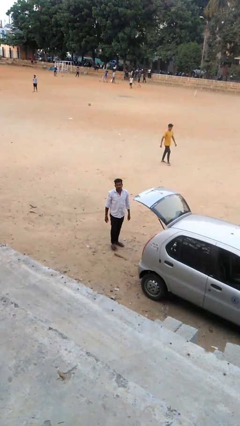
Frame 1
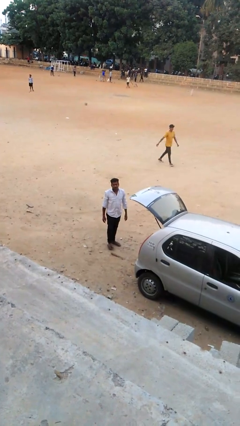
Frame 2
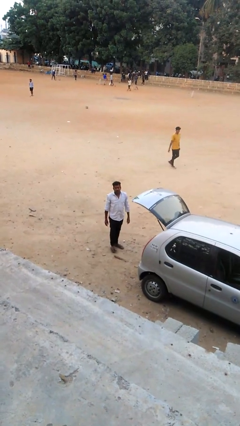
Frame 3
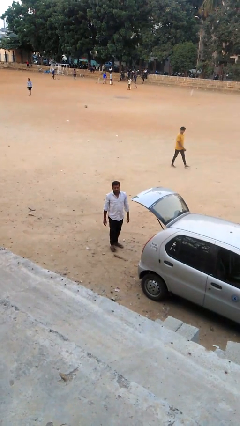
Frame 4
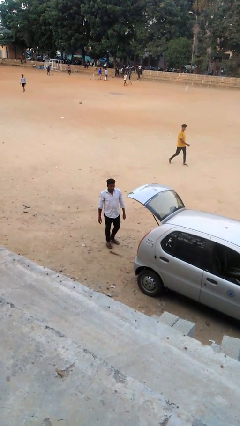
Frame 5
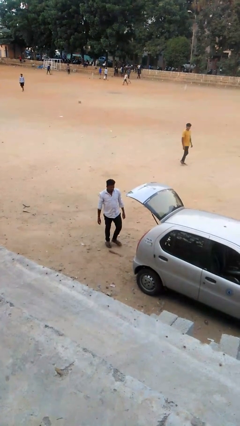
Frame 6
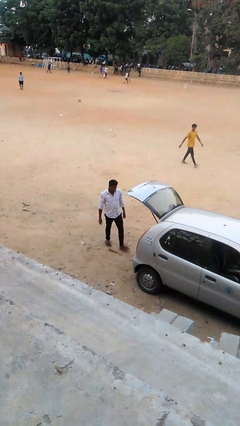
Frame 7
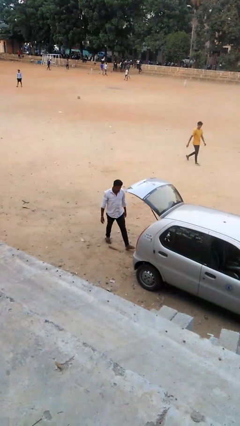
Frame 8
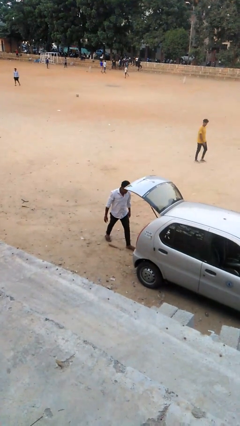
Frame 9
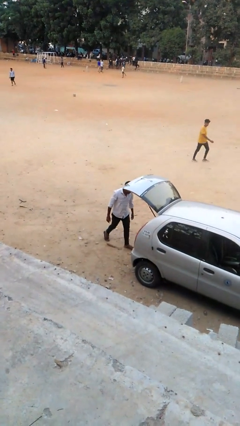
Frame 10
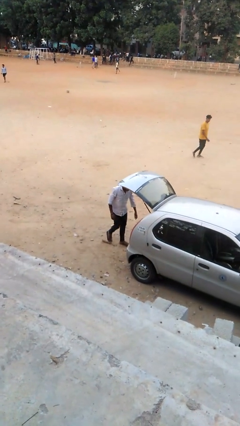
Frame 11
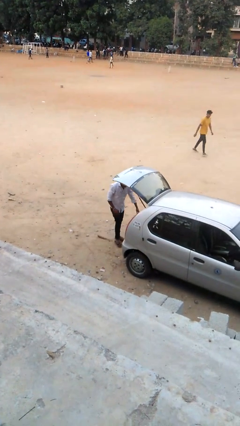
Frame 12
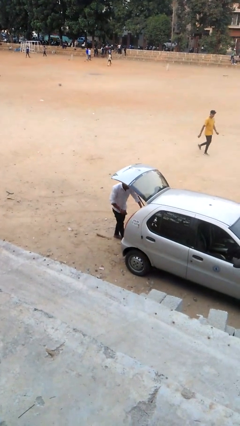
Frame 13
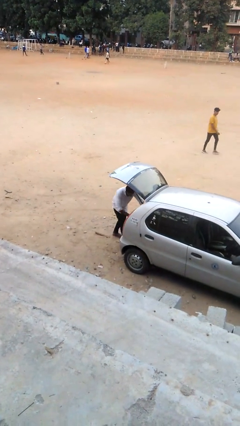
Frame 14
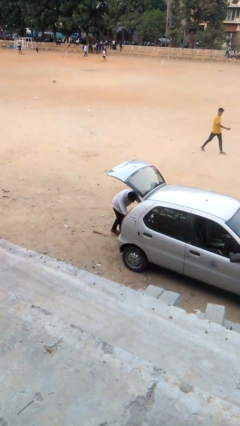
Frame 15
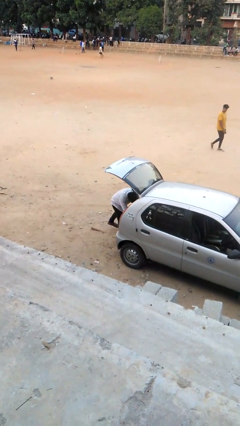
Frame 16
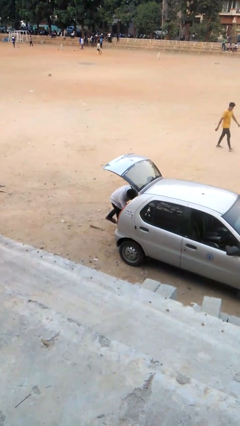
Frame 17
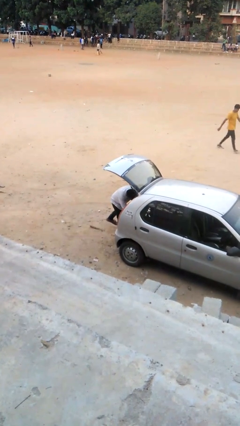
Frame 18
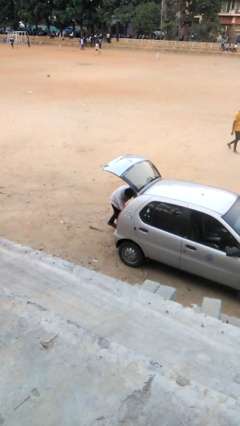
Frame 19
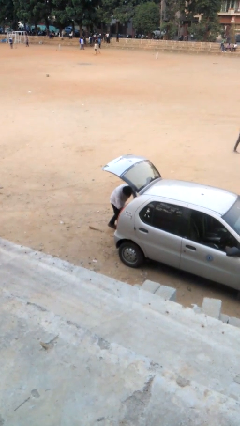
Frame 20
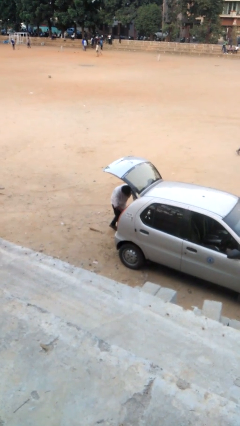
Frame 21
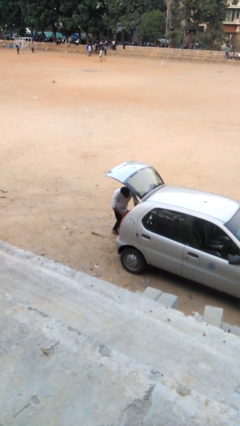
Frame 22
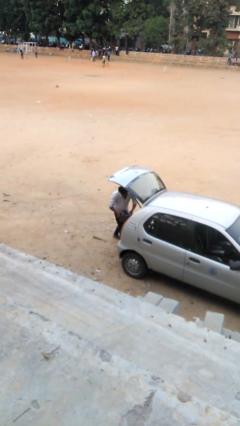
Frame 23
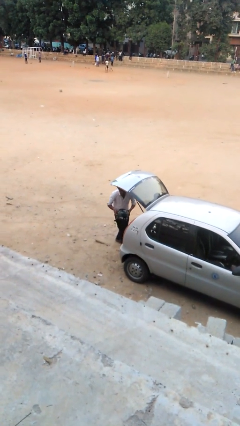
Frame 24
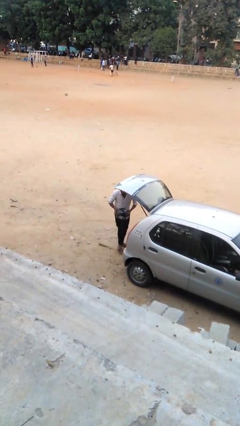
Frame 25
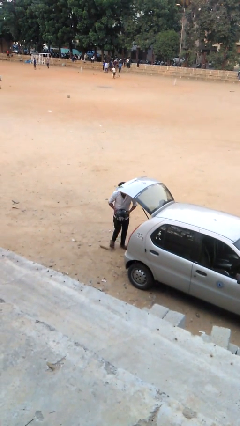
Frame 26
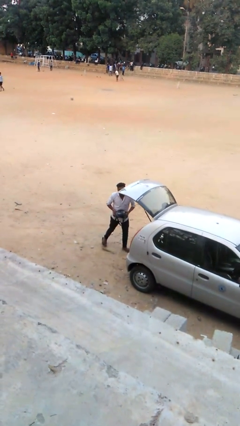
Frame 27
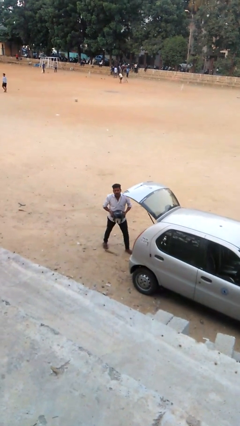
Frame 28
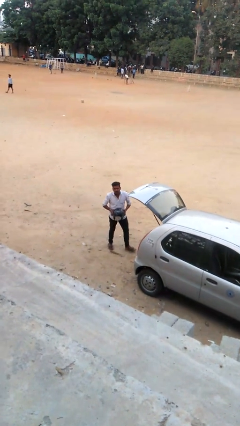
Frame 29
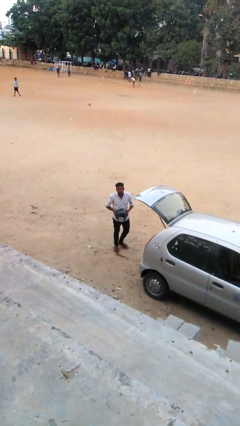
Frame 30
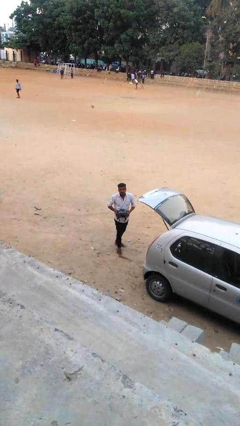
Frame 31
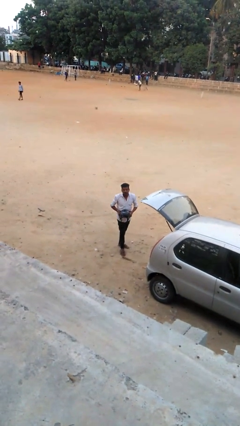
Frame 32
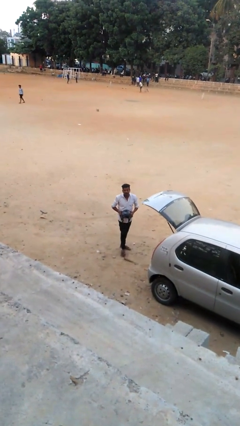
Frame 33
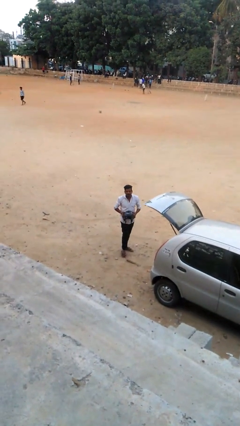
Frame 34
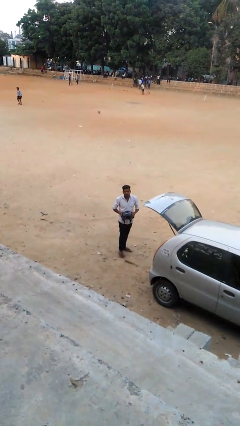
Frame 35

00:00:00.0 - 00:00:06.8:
person unloads car

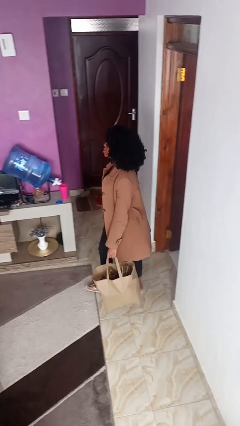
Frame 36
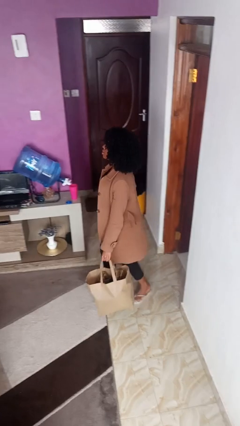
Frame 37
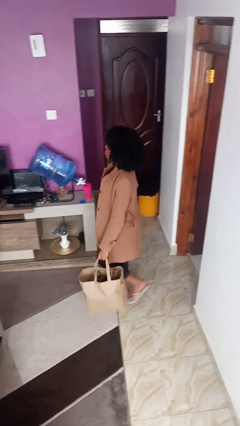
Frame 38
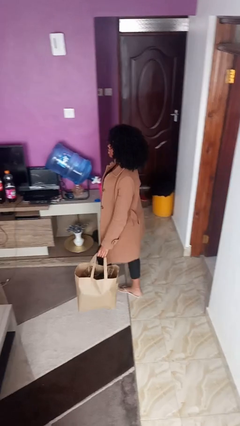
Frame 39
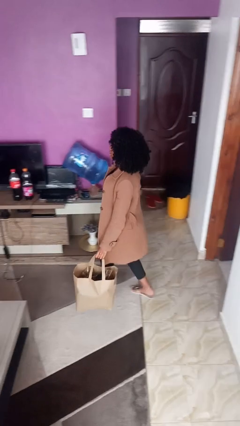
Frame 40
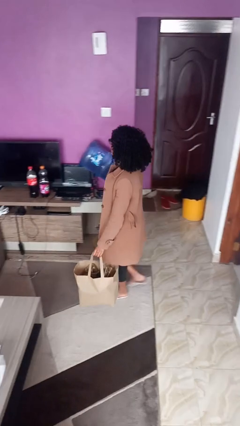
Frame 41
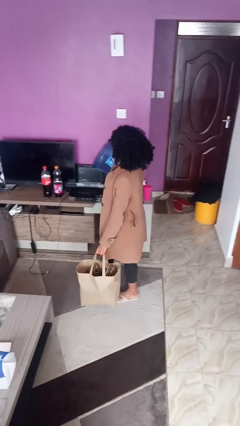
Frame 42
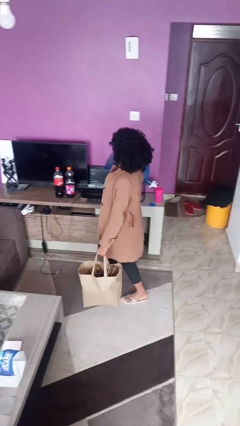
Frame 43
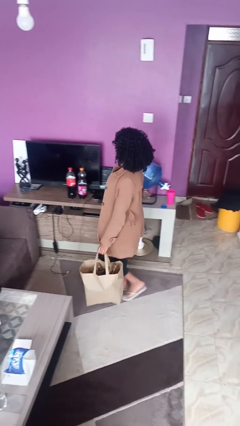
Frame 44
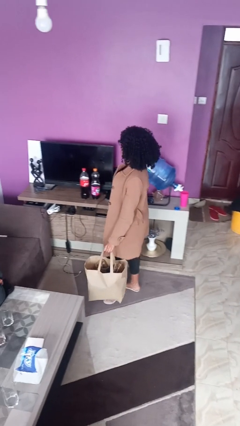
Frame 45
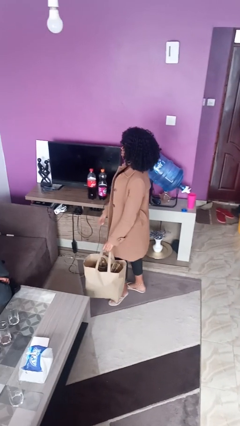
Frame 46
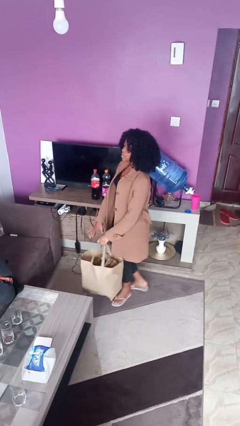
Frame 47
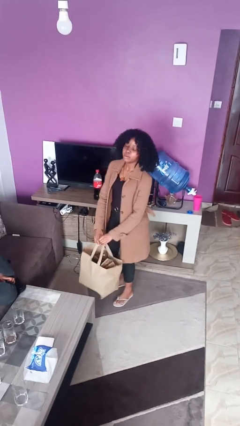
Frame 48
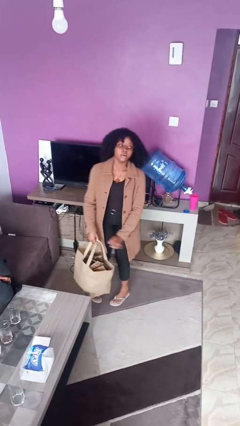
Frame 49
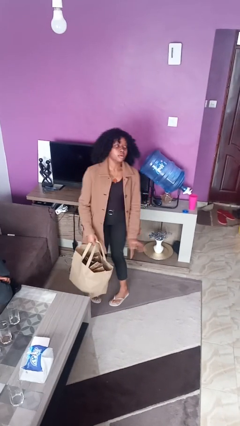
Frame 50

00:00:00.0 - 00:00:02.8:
person carries groceries

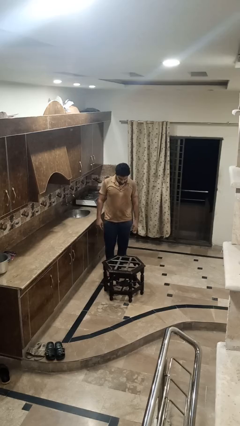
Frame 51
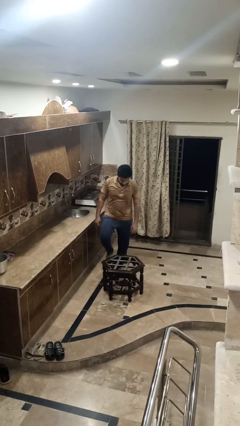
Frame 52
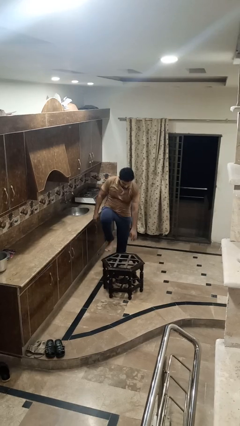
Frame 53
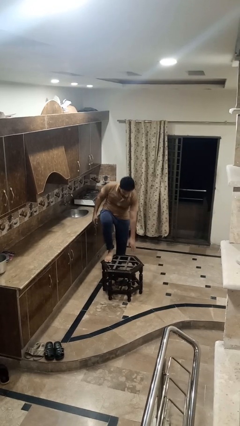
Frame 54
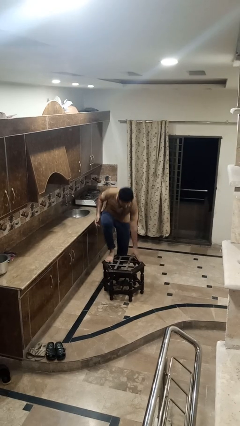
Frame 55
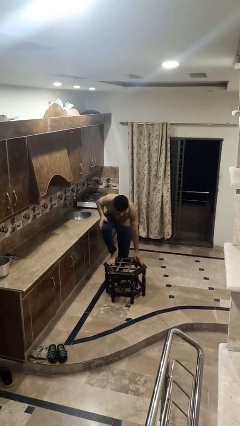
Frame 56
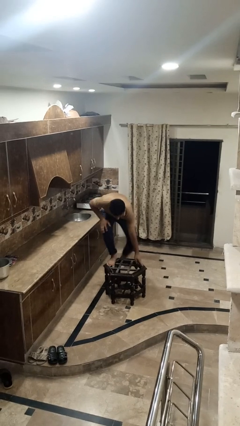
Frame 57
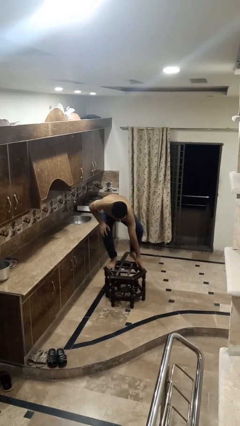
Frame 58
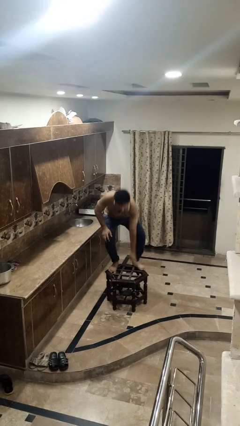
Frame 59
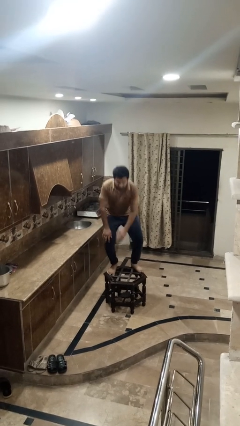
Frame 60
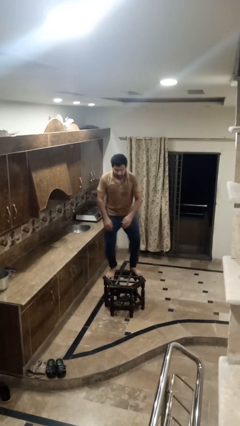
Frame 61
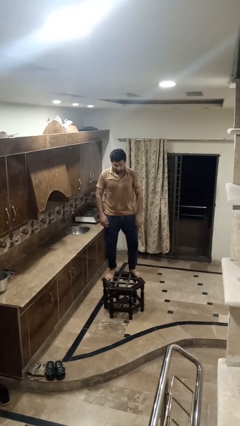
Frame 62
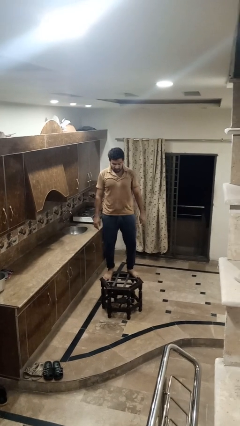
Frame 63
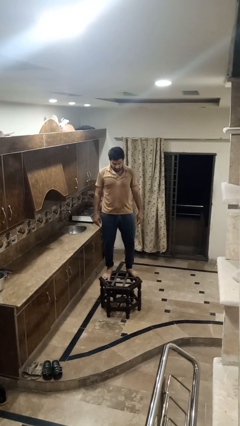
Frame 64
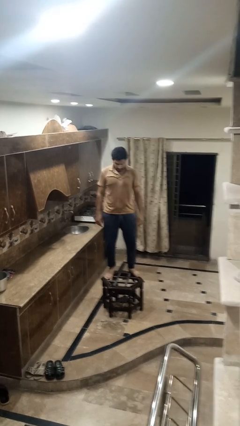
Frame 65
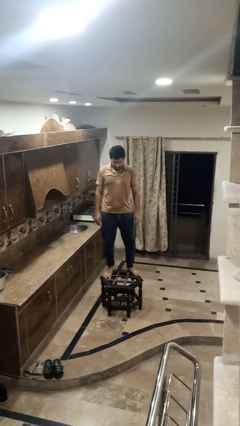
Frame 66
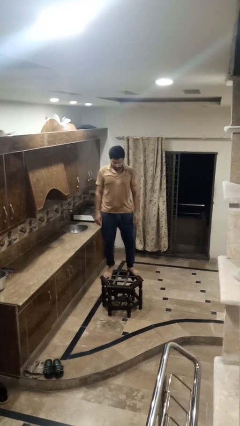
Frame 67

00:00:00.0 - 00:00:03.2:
person climbs on table

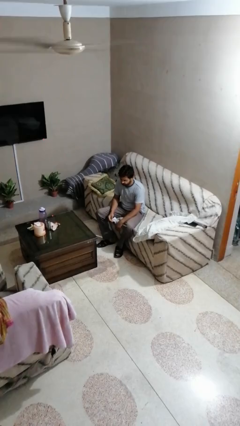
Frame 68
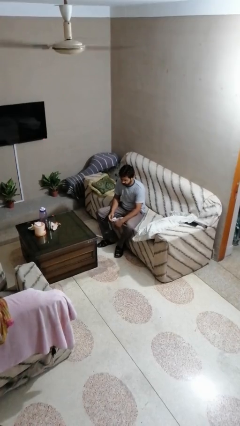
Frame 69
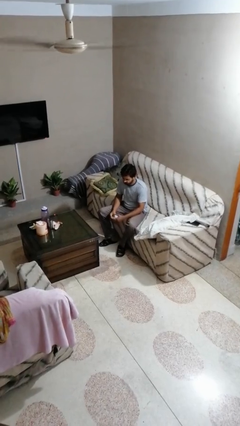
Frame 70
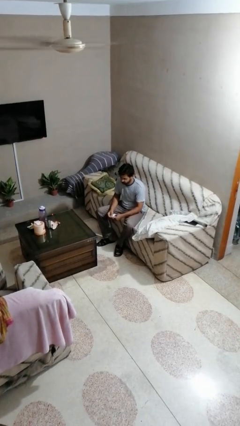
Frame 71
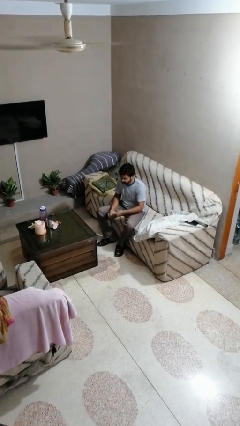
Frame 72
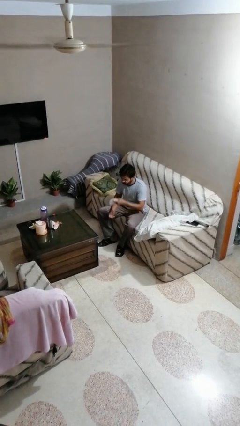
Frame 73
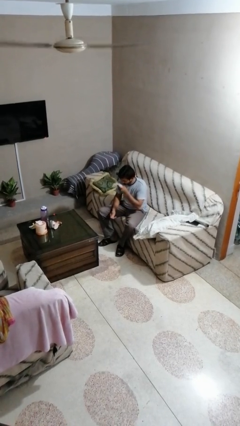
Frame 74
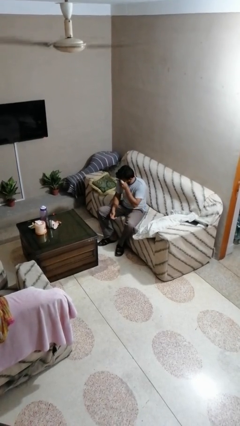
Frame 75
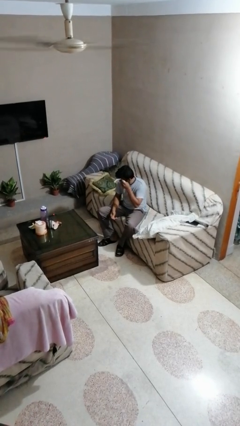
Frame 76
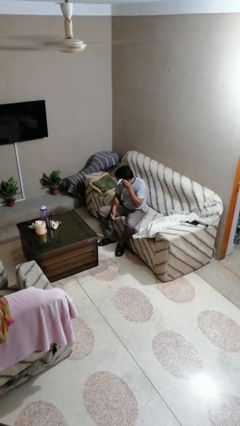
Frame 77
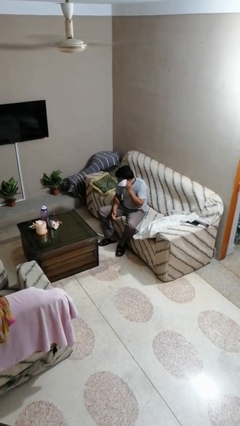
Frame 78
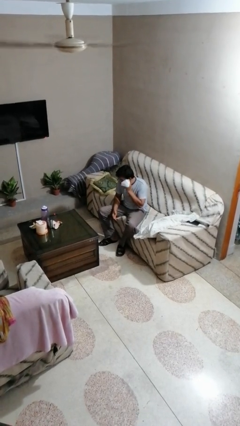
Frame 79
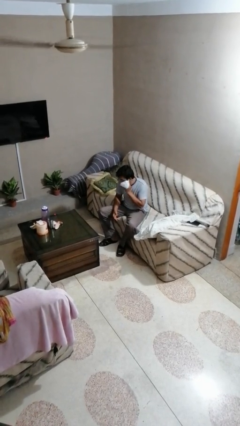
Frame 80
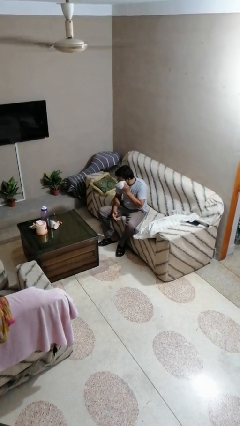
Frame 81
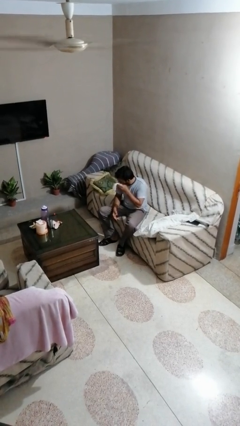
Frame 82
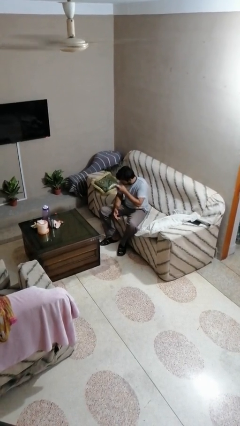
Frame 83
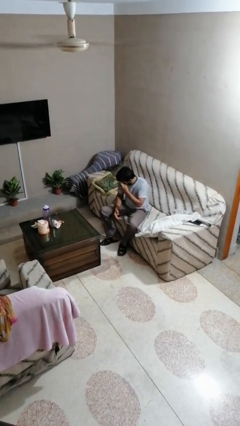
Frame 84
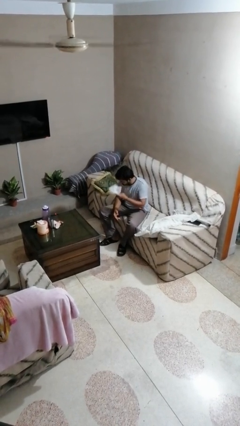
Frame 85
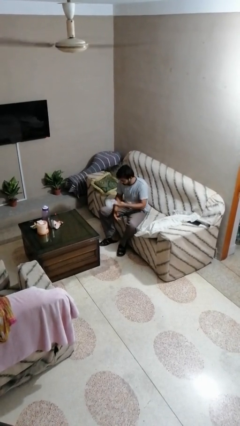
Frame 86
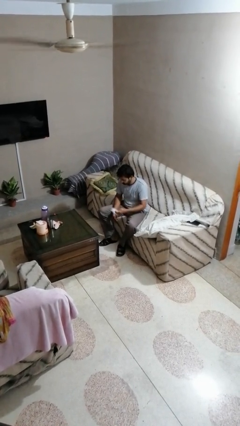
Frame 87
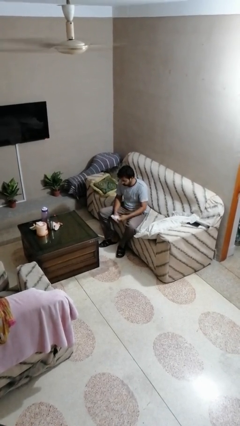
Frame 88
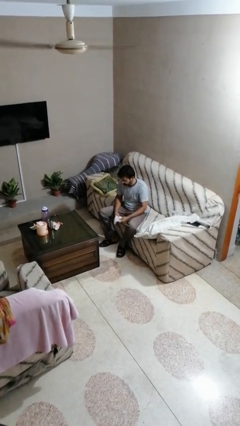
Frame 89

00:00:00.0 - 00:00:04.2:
person wipes mouth with napkin

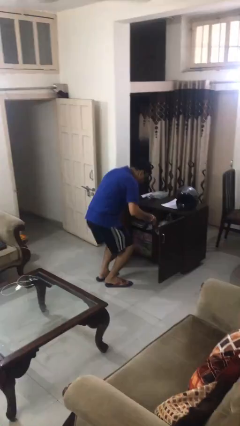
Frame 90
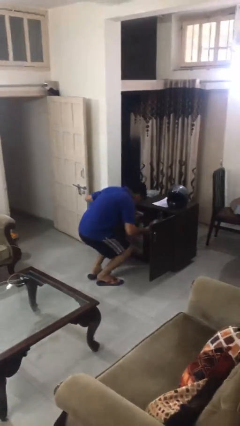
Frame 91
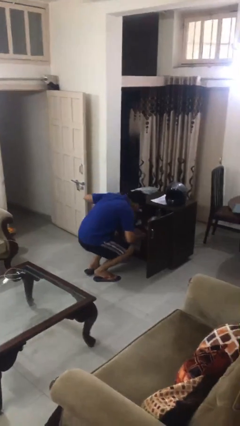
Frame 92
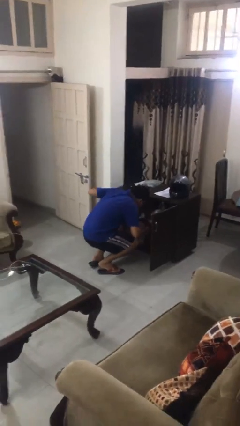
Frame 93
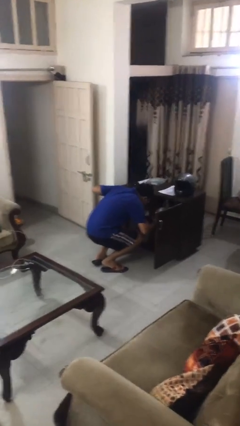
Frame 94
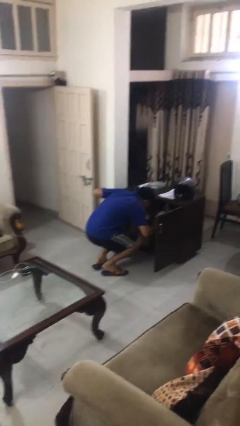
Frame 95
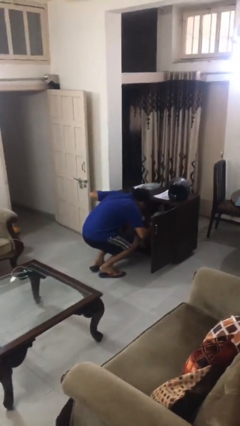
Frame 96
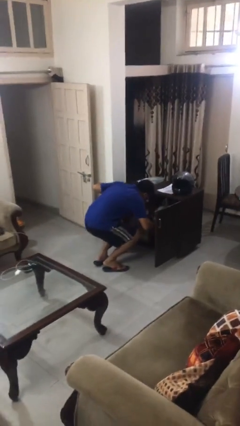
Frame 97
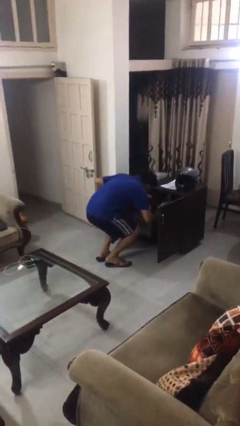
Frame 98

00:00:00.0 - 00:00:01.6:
person searches in cabinet
